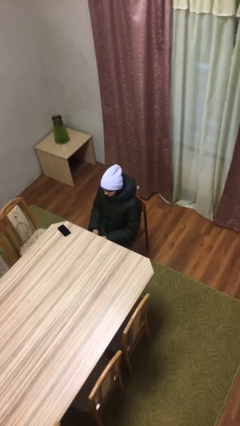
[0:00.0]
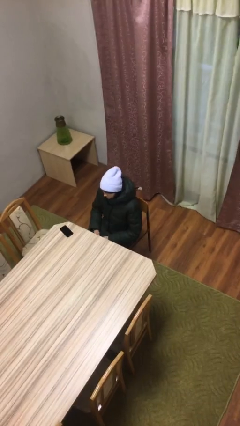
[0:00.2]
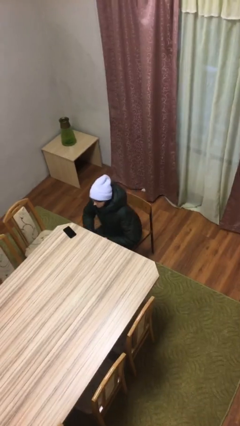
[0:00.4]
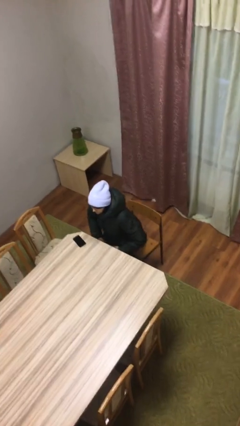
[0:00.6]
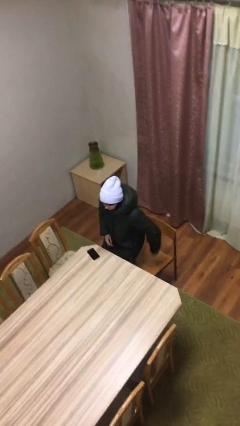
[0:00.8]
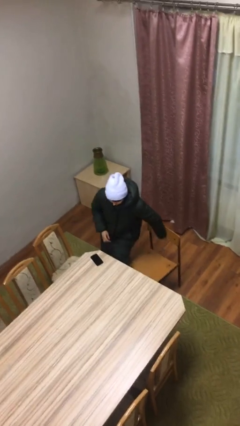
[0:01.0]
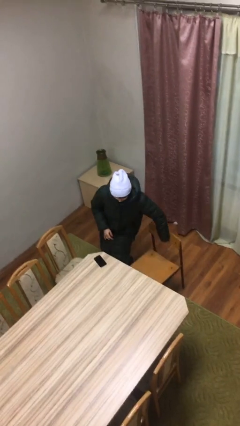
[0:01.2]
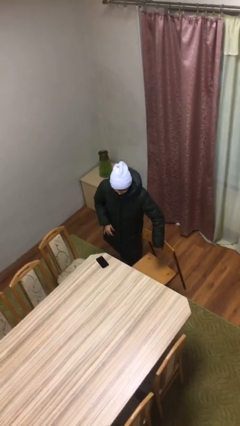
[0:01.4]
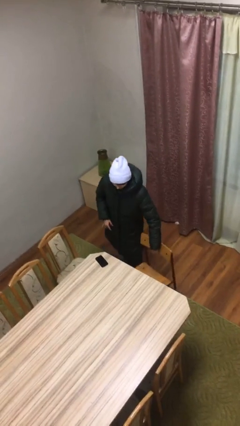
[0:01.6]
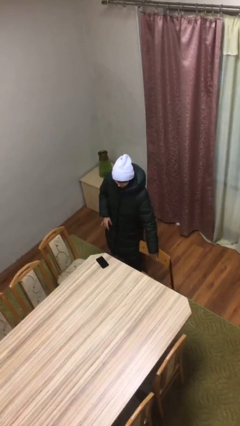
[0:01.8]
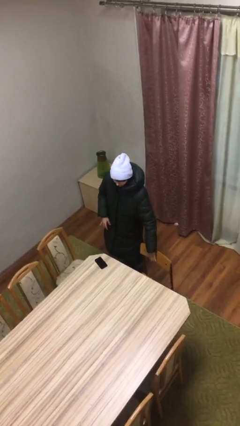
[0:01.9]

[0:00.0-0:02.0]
person stands up

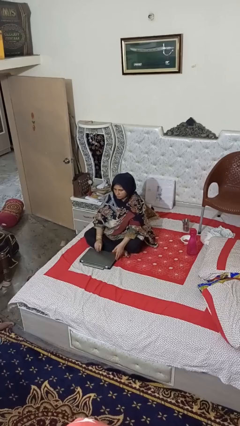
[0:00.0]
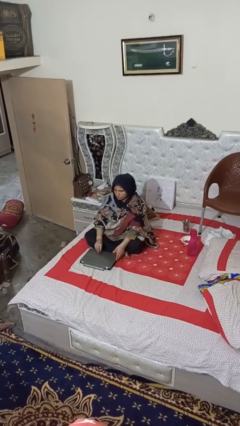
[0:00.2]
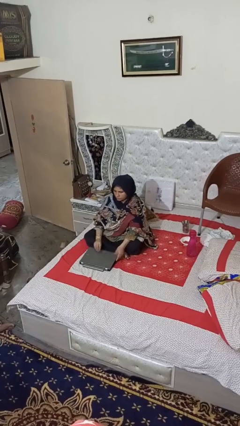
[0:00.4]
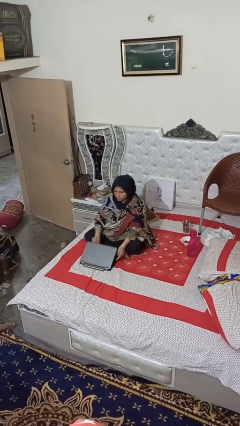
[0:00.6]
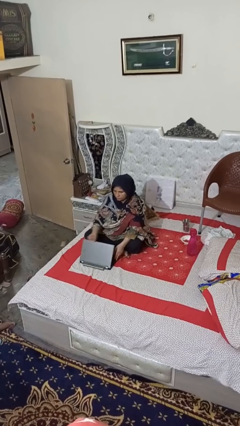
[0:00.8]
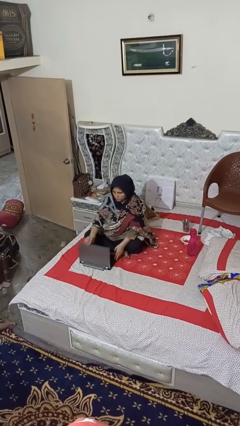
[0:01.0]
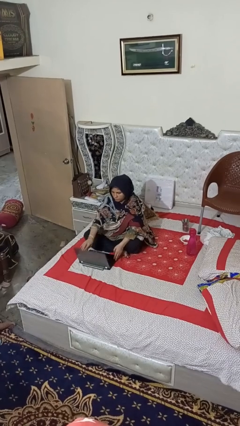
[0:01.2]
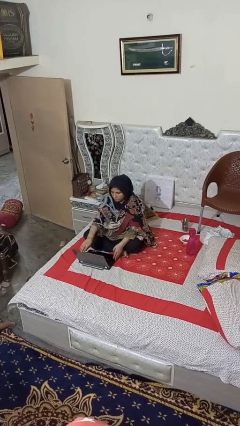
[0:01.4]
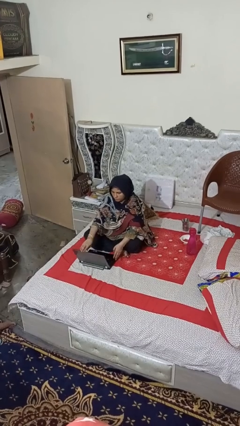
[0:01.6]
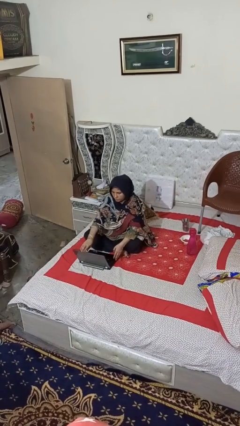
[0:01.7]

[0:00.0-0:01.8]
person opens laptop

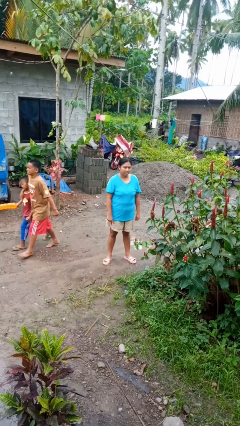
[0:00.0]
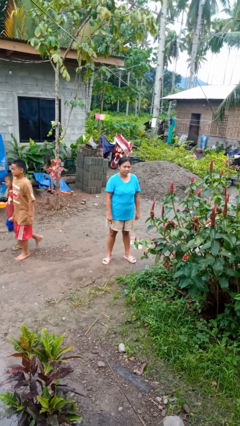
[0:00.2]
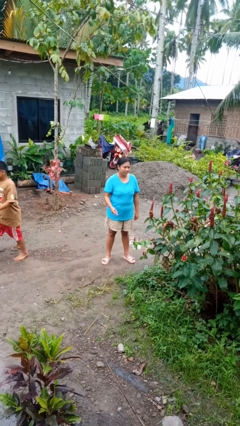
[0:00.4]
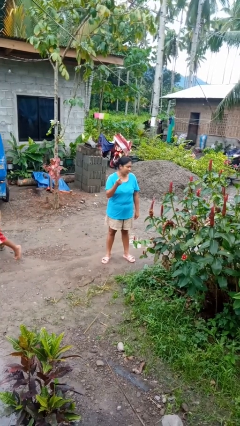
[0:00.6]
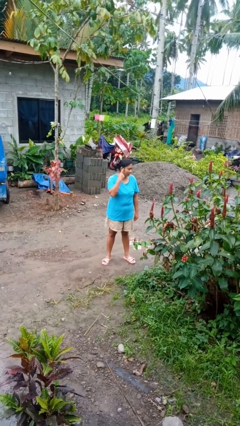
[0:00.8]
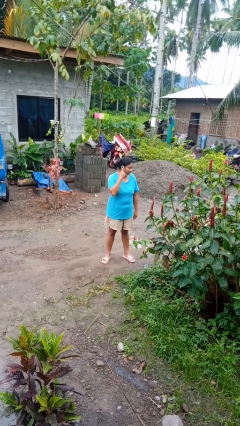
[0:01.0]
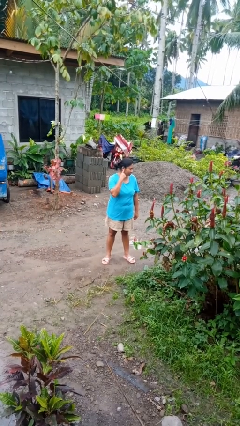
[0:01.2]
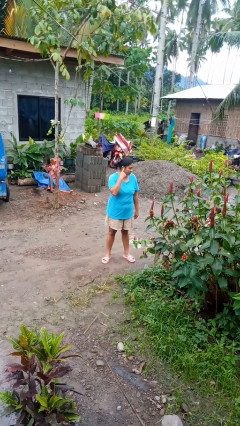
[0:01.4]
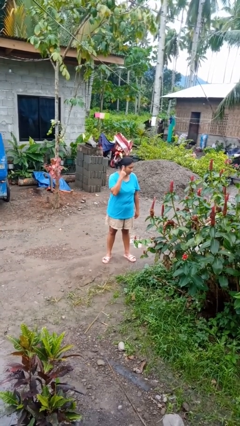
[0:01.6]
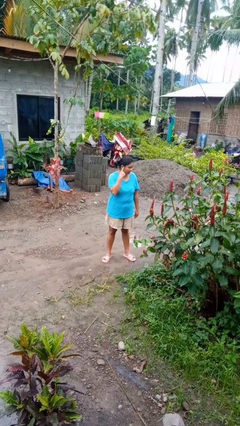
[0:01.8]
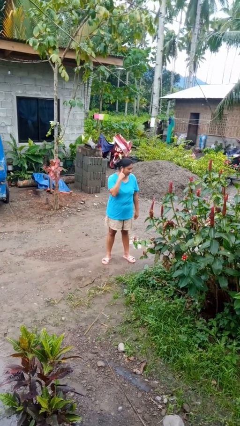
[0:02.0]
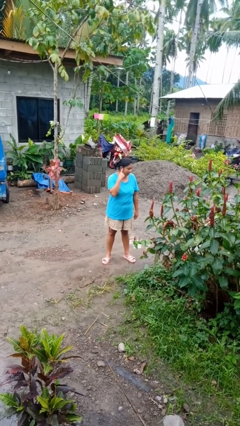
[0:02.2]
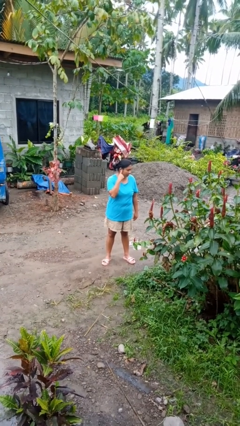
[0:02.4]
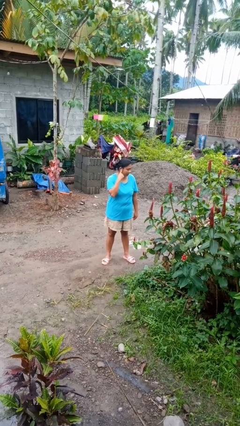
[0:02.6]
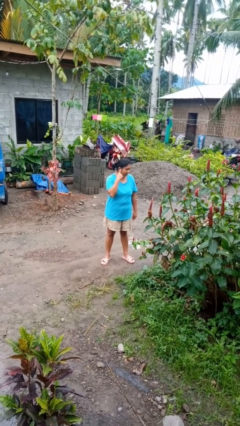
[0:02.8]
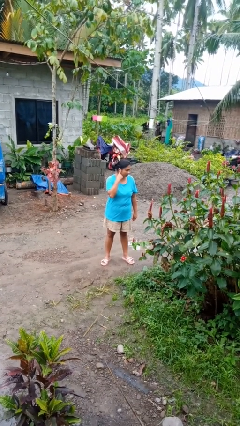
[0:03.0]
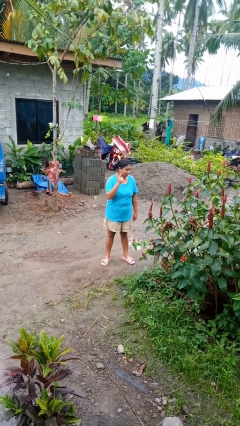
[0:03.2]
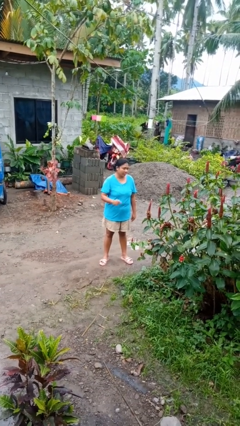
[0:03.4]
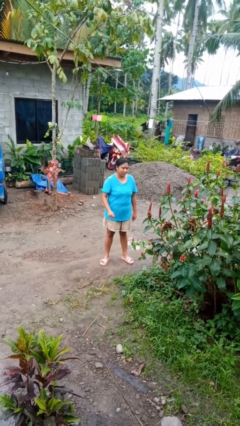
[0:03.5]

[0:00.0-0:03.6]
person gestures listen closely

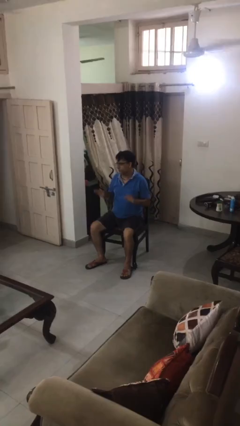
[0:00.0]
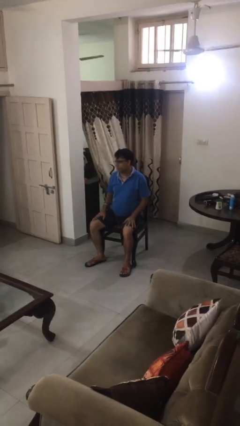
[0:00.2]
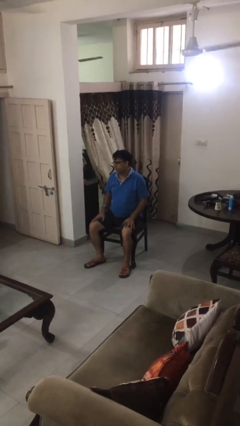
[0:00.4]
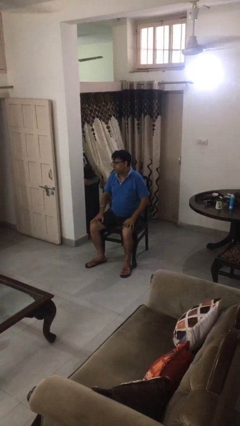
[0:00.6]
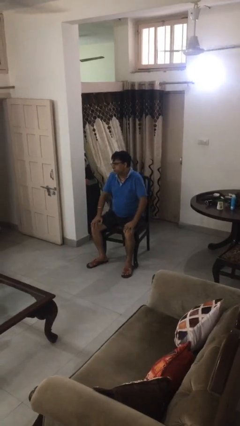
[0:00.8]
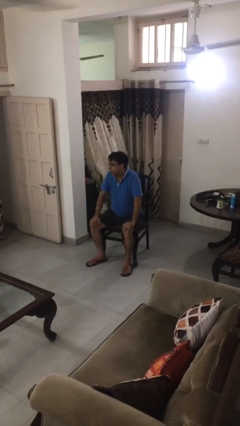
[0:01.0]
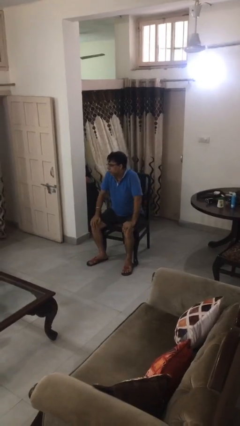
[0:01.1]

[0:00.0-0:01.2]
person slaps hands on thighs

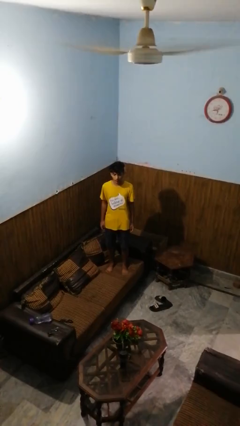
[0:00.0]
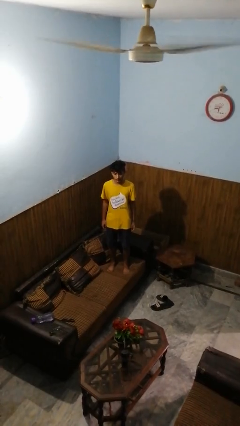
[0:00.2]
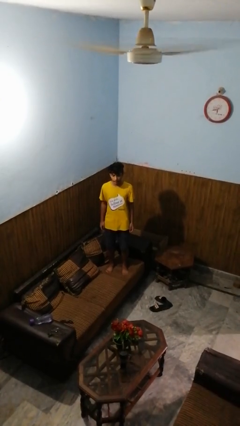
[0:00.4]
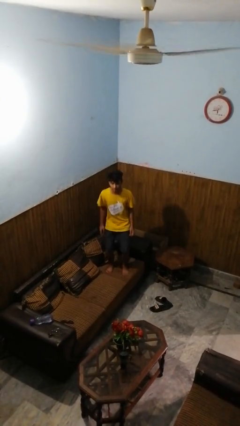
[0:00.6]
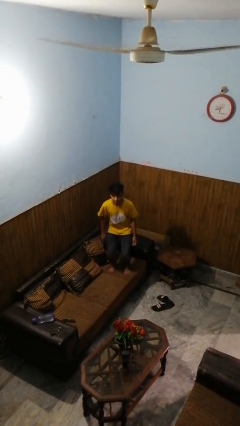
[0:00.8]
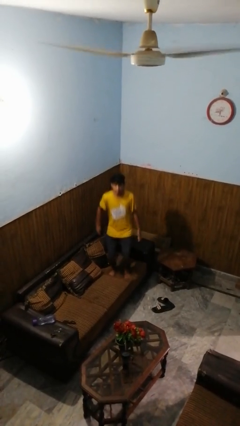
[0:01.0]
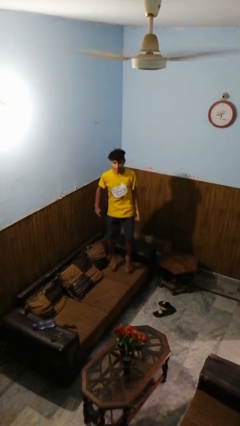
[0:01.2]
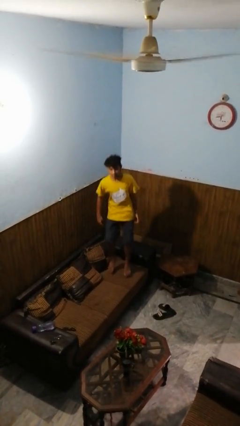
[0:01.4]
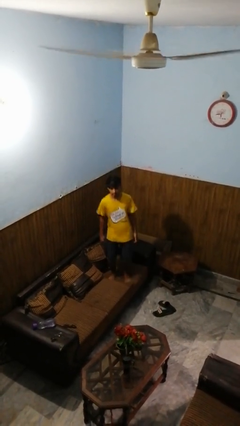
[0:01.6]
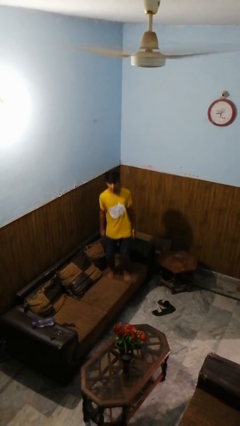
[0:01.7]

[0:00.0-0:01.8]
person jumps on couch

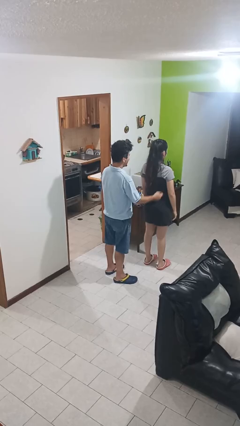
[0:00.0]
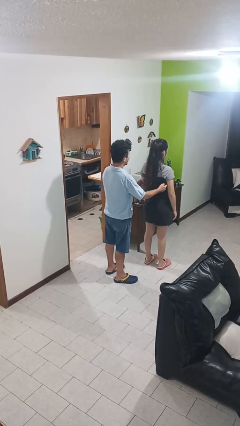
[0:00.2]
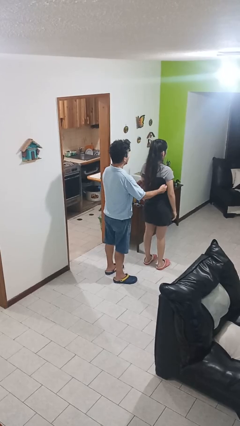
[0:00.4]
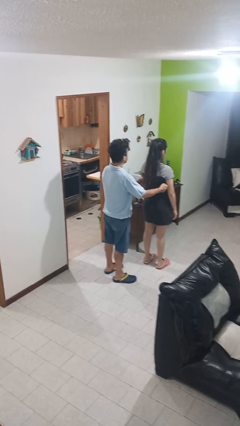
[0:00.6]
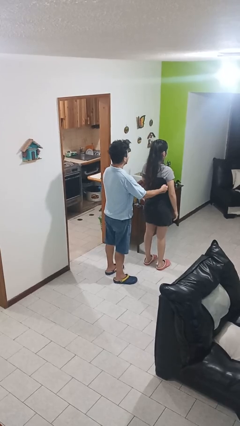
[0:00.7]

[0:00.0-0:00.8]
person tickles person

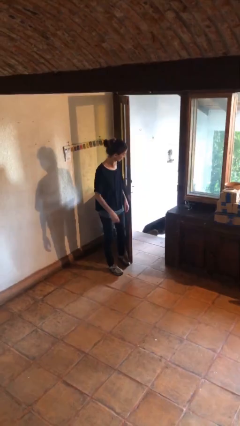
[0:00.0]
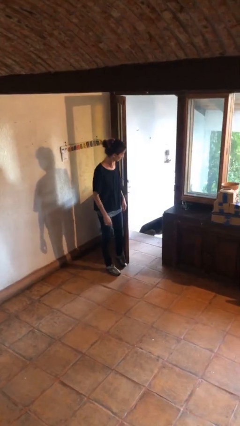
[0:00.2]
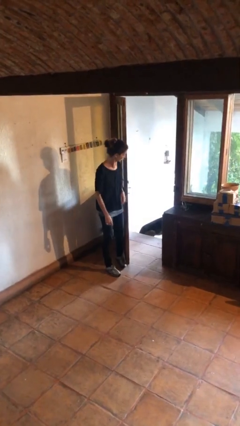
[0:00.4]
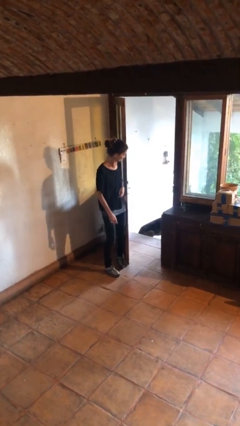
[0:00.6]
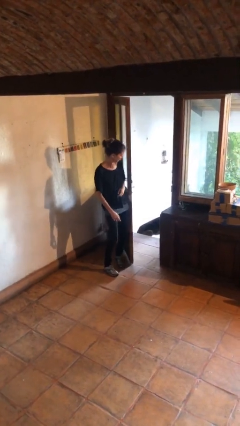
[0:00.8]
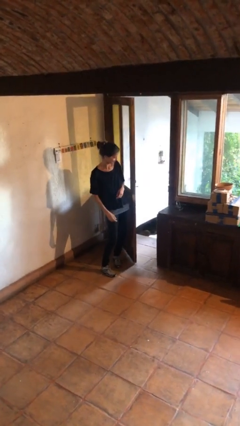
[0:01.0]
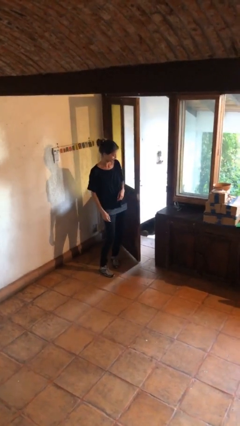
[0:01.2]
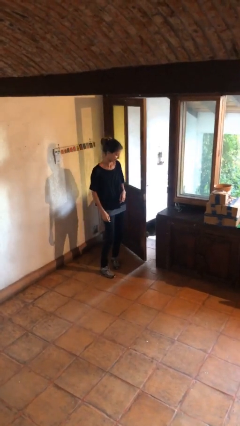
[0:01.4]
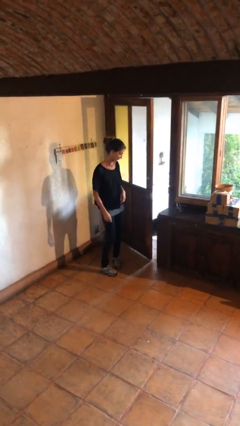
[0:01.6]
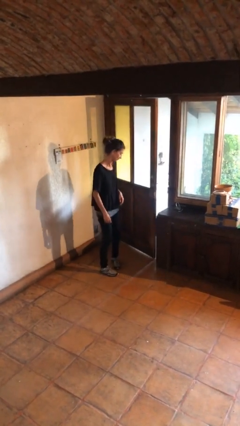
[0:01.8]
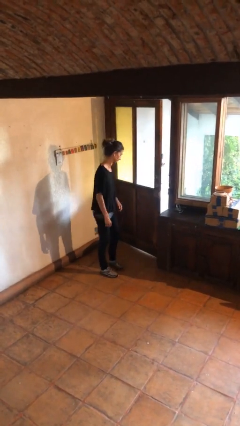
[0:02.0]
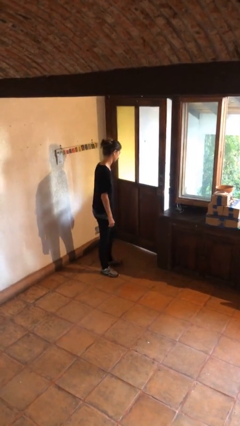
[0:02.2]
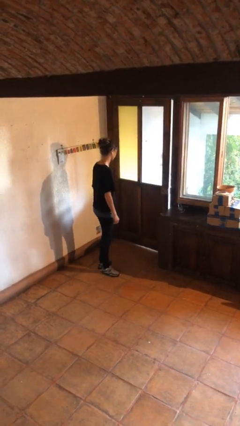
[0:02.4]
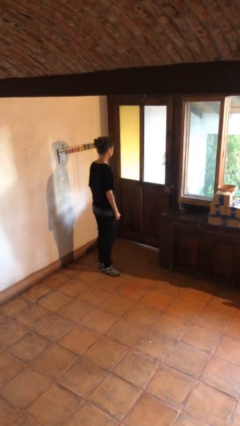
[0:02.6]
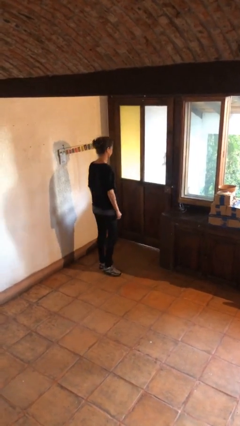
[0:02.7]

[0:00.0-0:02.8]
person closes door with hip

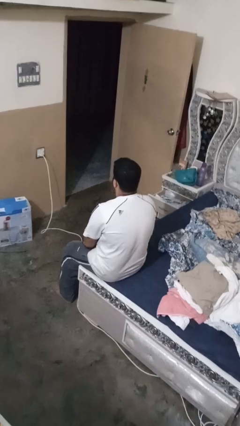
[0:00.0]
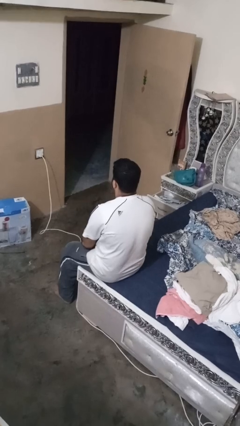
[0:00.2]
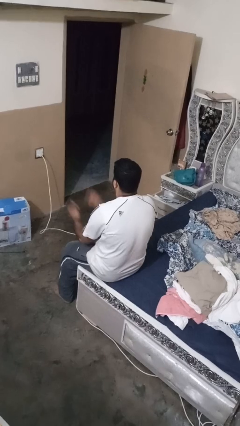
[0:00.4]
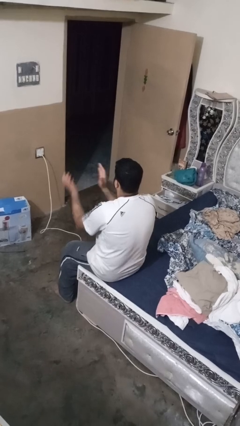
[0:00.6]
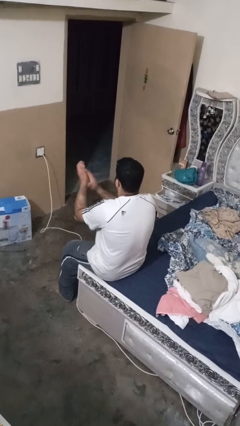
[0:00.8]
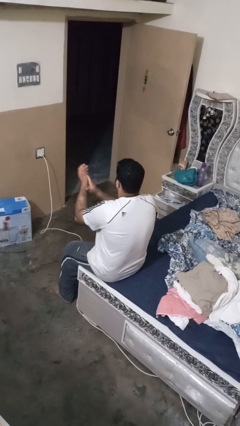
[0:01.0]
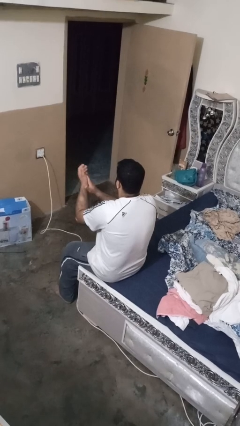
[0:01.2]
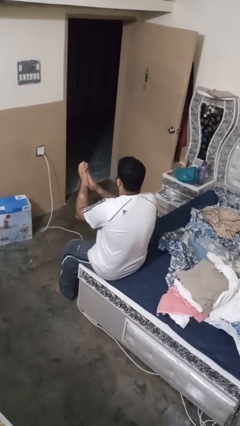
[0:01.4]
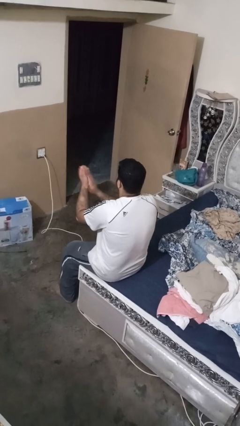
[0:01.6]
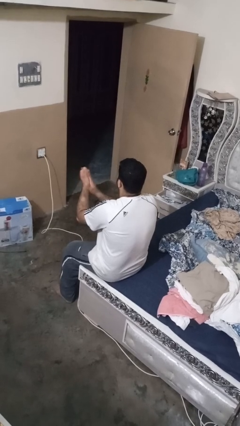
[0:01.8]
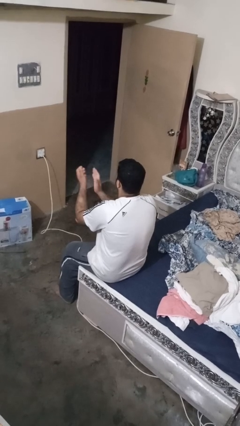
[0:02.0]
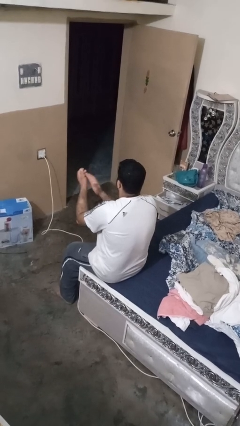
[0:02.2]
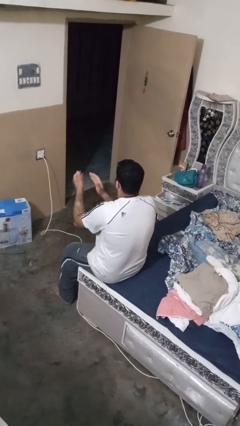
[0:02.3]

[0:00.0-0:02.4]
person claps hands

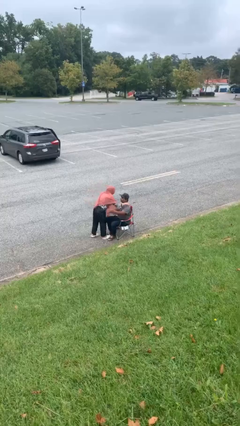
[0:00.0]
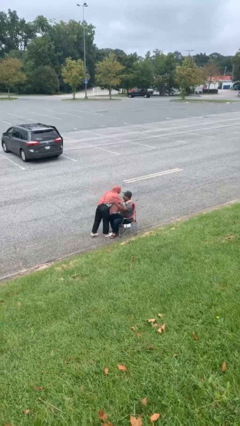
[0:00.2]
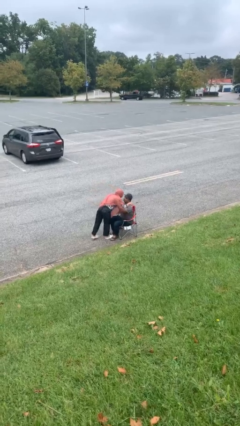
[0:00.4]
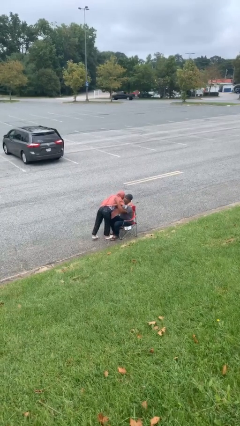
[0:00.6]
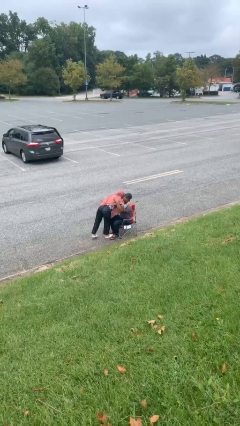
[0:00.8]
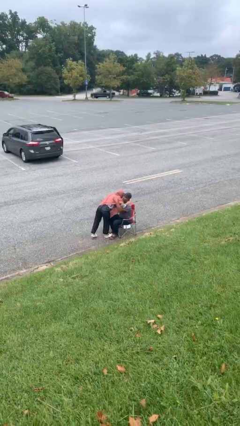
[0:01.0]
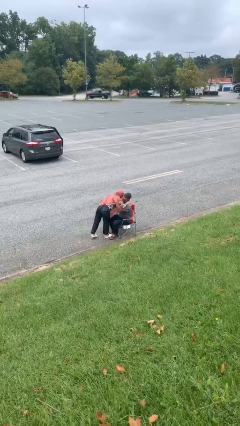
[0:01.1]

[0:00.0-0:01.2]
person embraces person
